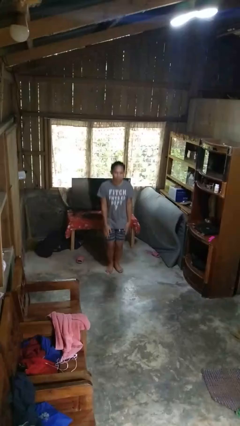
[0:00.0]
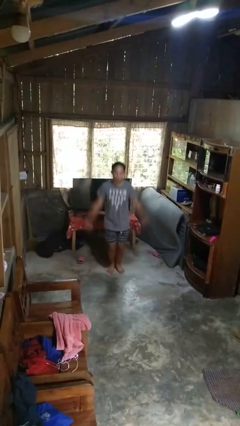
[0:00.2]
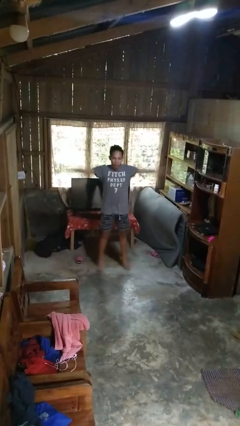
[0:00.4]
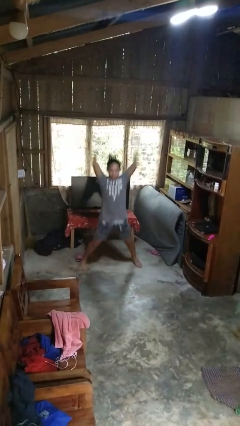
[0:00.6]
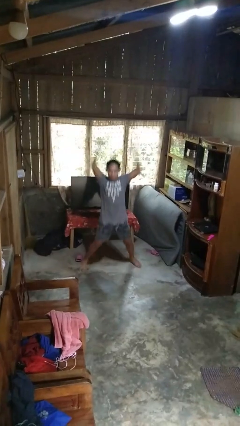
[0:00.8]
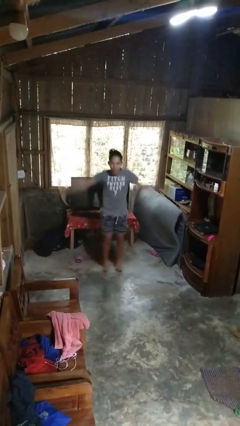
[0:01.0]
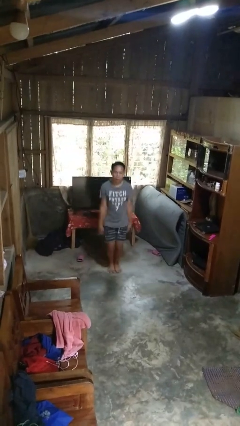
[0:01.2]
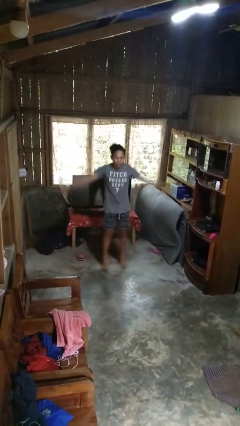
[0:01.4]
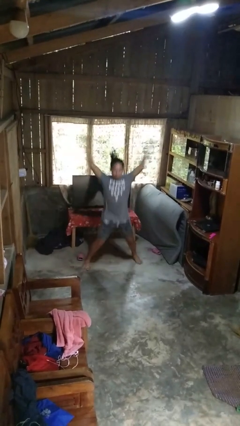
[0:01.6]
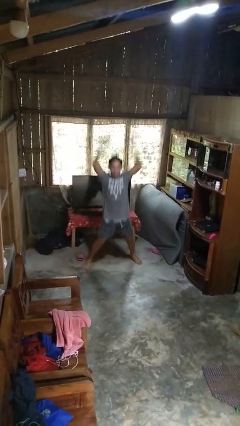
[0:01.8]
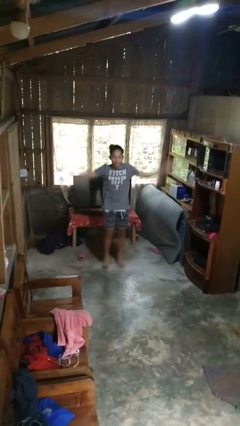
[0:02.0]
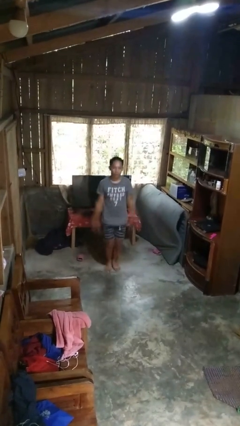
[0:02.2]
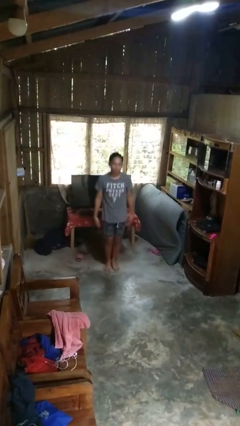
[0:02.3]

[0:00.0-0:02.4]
person exercises with jumping jacks

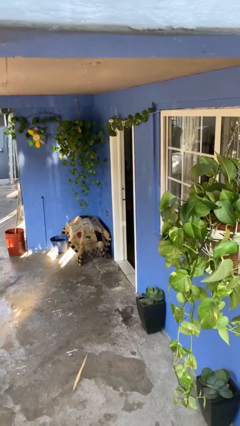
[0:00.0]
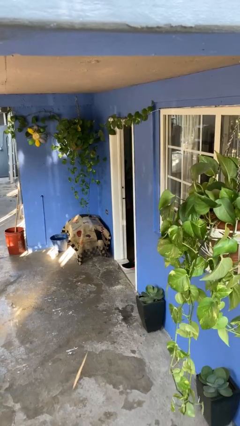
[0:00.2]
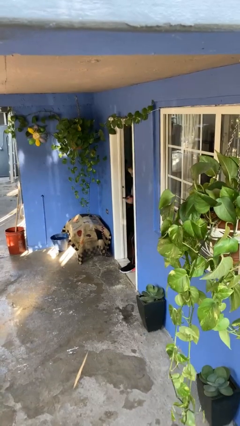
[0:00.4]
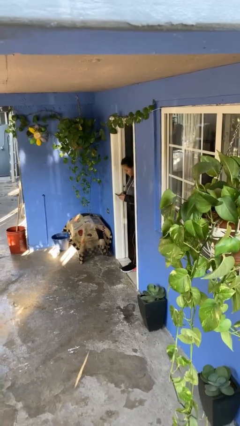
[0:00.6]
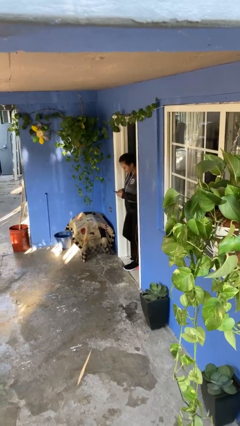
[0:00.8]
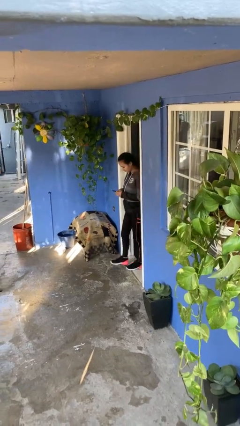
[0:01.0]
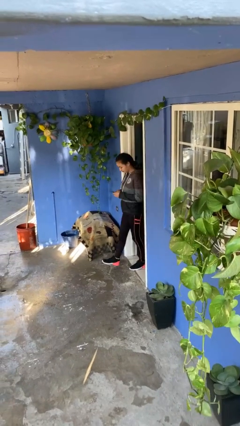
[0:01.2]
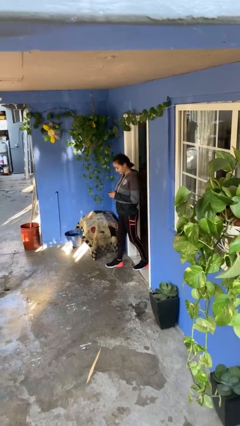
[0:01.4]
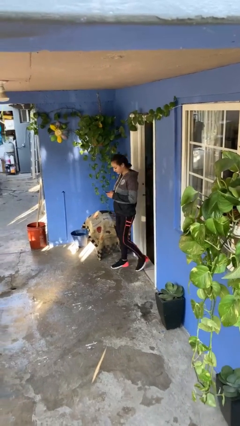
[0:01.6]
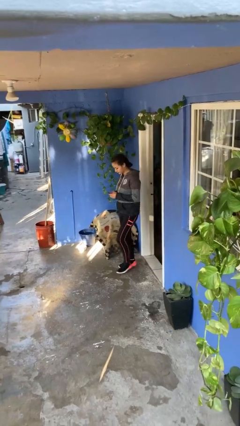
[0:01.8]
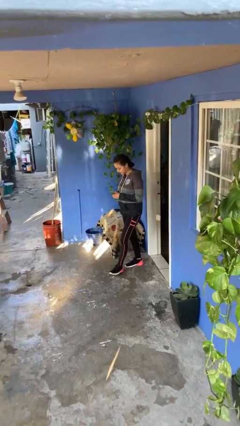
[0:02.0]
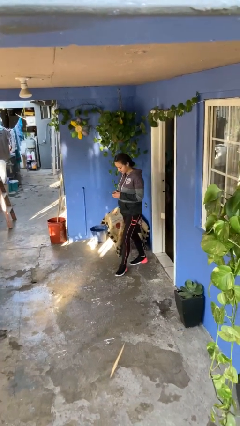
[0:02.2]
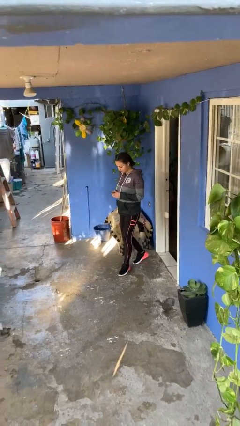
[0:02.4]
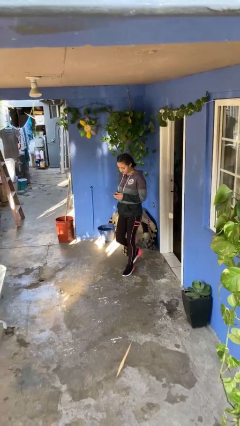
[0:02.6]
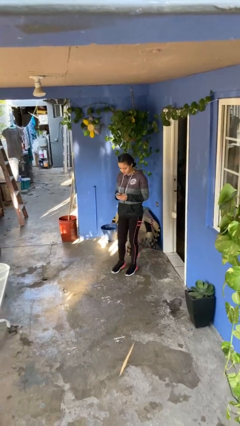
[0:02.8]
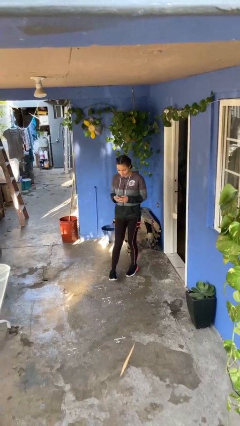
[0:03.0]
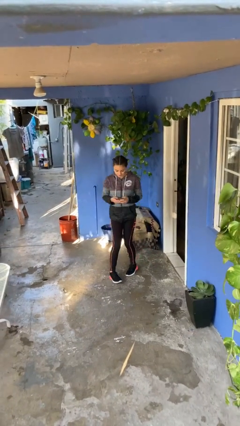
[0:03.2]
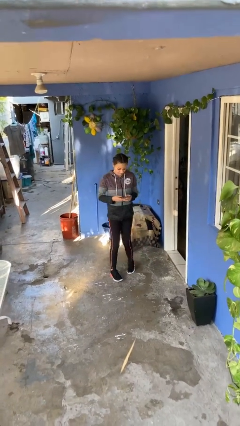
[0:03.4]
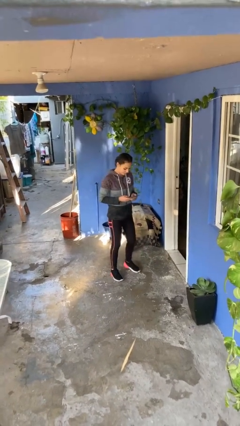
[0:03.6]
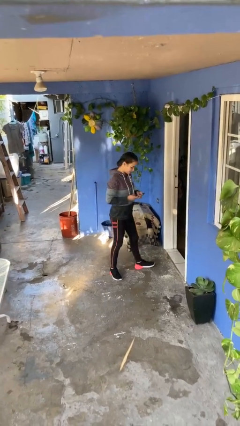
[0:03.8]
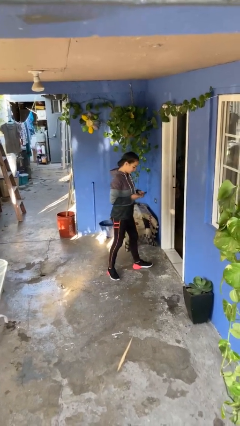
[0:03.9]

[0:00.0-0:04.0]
person enters scene through structure

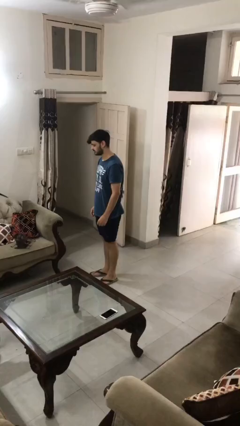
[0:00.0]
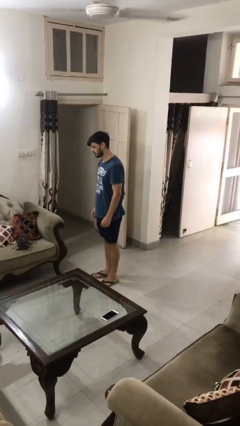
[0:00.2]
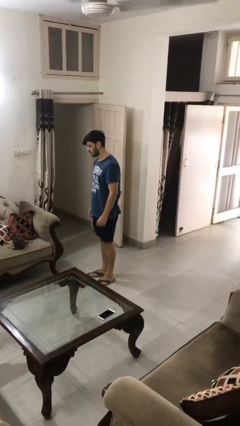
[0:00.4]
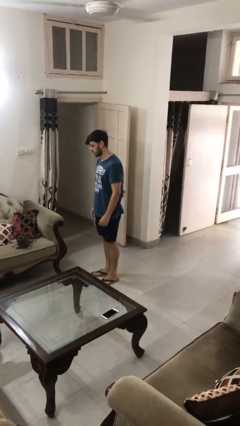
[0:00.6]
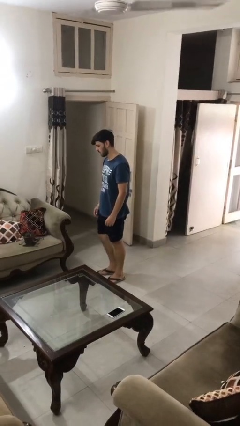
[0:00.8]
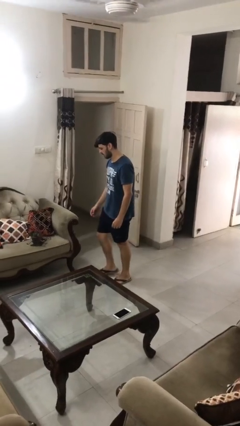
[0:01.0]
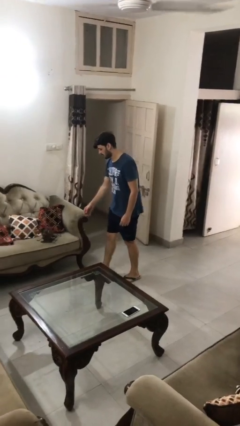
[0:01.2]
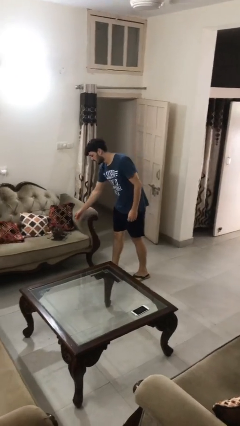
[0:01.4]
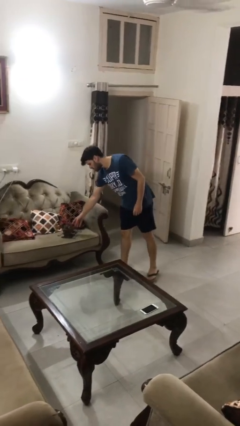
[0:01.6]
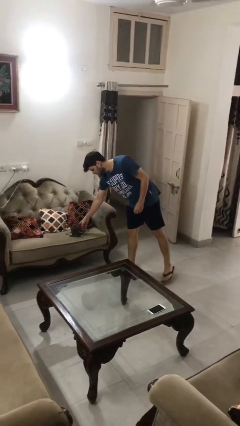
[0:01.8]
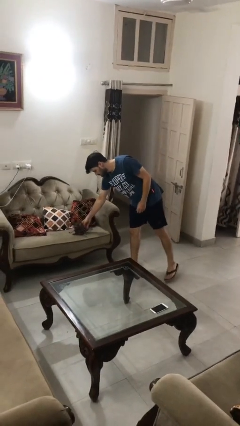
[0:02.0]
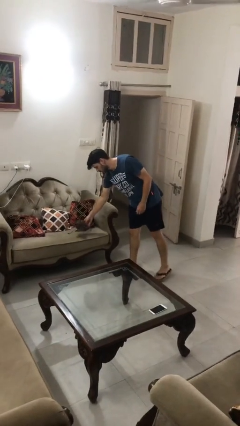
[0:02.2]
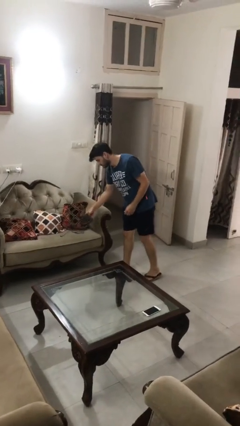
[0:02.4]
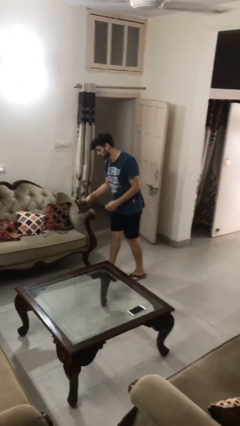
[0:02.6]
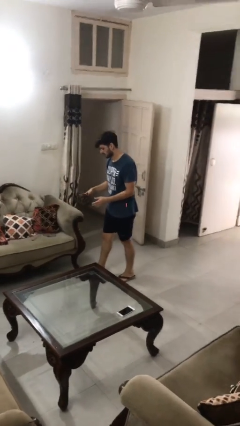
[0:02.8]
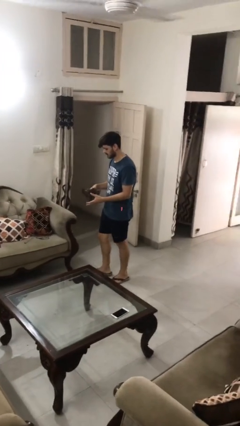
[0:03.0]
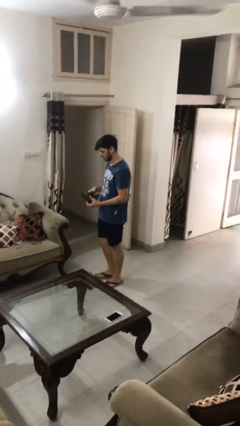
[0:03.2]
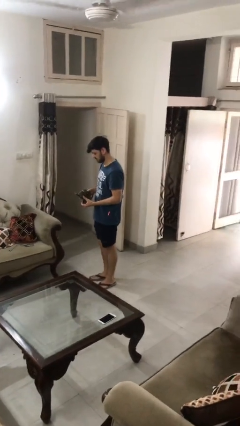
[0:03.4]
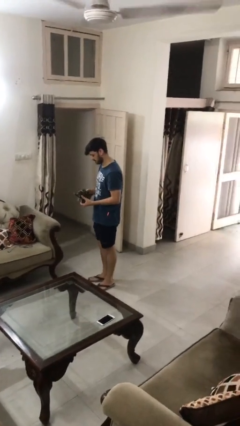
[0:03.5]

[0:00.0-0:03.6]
person picks up object from couch

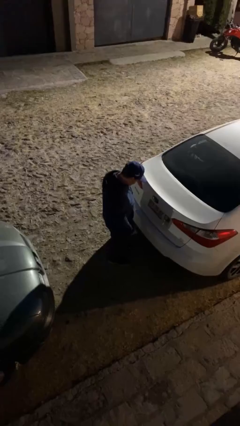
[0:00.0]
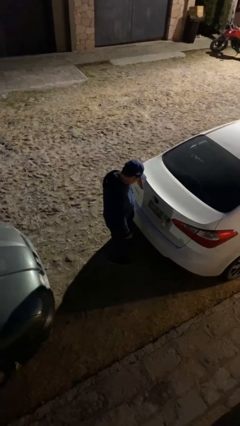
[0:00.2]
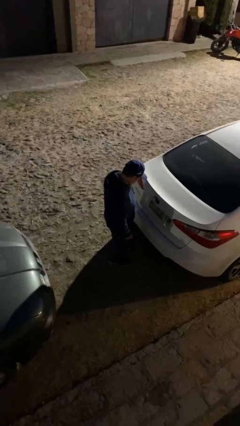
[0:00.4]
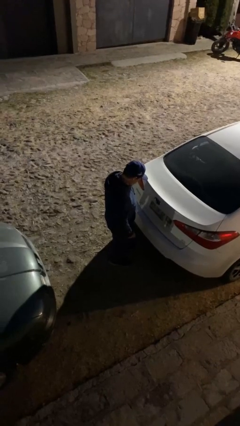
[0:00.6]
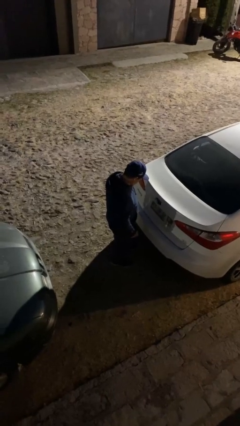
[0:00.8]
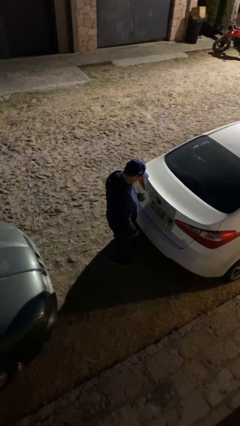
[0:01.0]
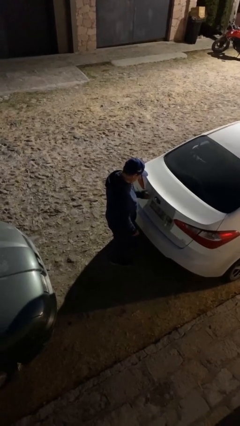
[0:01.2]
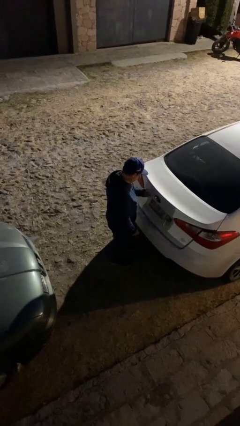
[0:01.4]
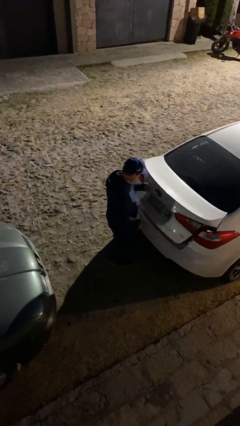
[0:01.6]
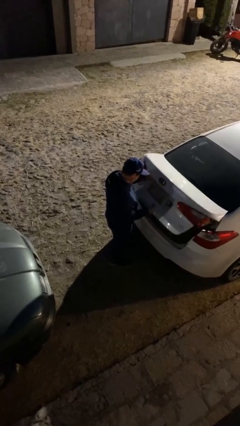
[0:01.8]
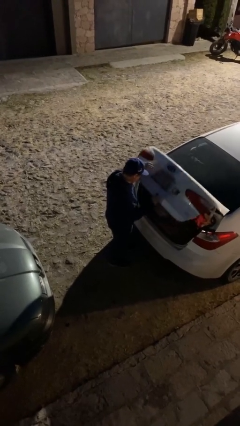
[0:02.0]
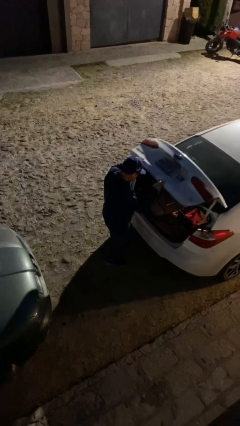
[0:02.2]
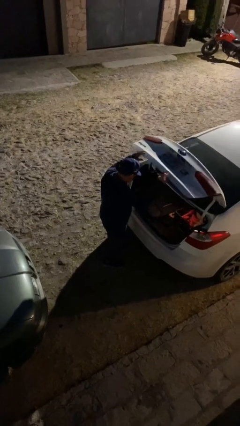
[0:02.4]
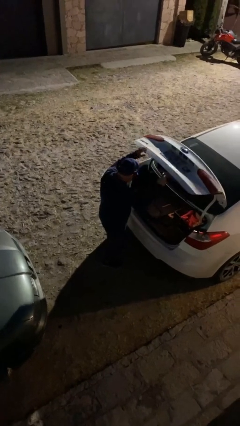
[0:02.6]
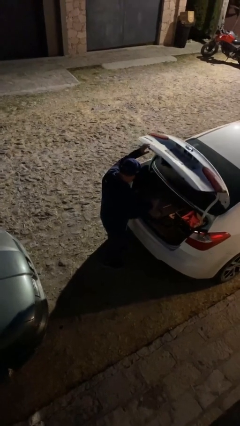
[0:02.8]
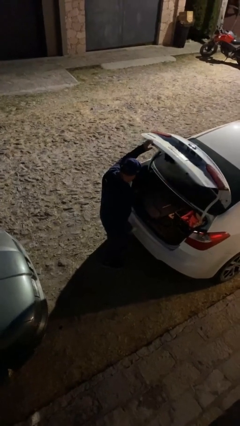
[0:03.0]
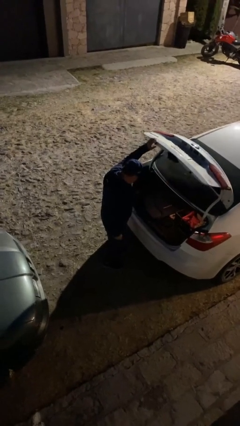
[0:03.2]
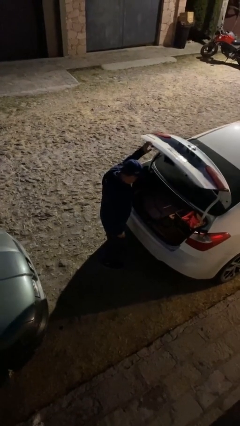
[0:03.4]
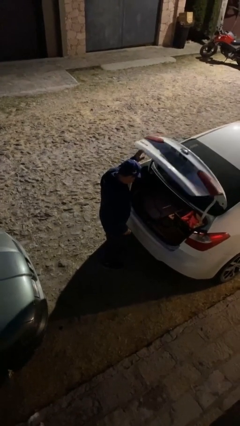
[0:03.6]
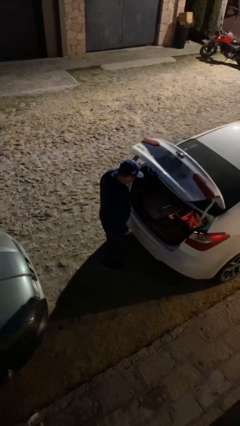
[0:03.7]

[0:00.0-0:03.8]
person opens car trunk

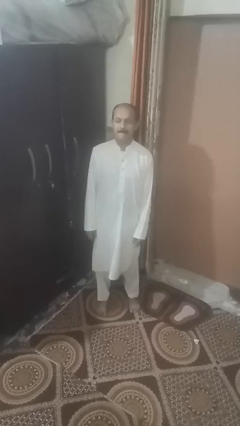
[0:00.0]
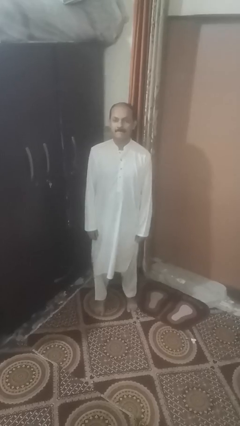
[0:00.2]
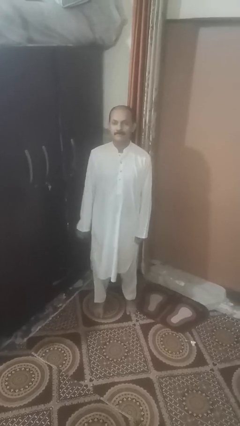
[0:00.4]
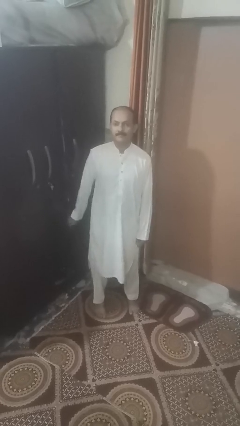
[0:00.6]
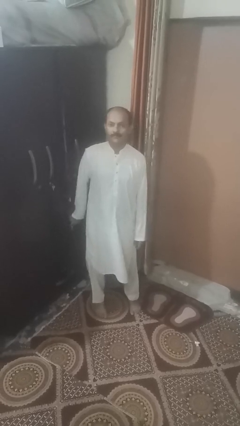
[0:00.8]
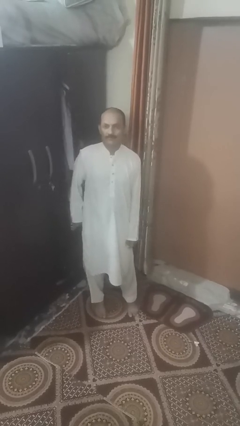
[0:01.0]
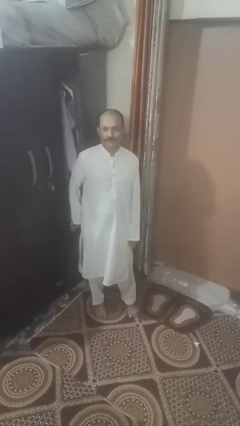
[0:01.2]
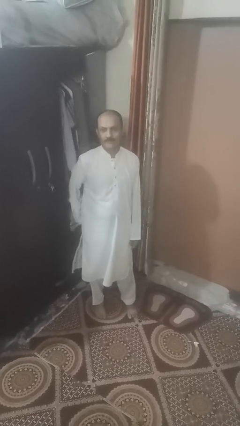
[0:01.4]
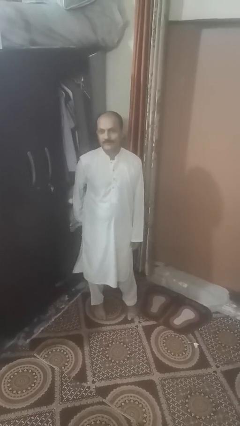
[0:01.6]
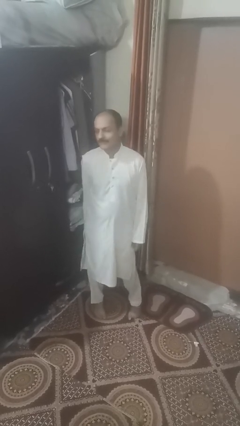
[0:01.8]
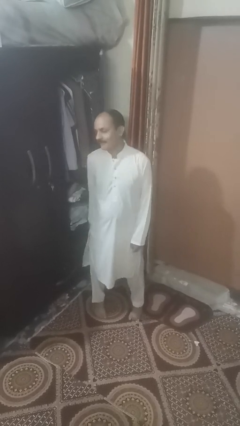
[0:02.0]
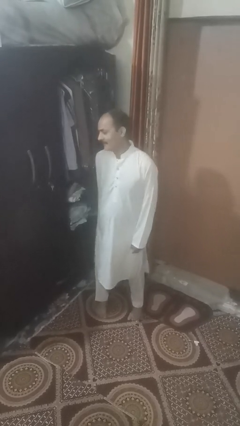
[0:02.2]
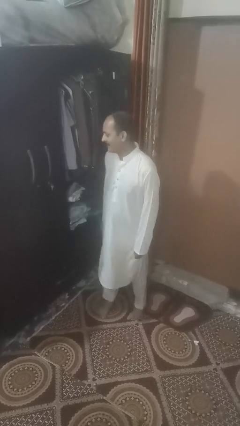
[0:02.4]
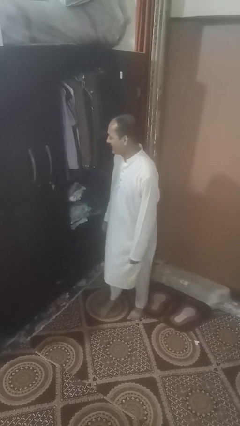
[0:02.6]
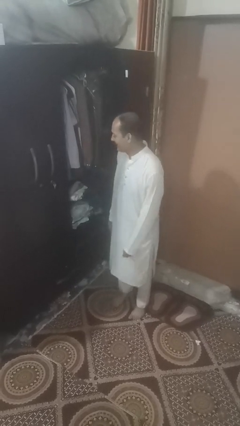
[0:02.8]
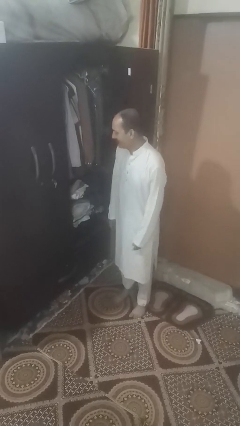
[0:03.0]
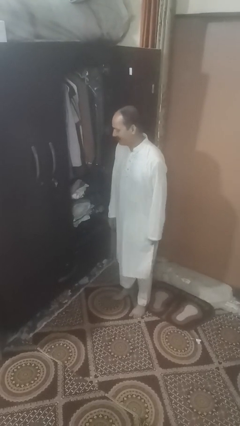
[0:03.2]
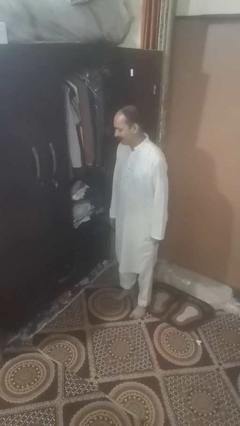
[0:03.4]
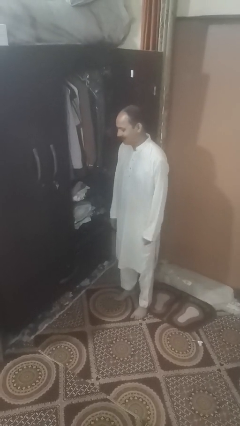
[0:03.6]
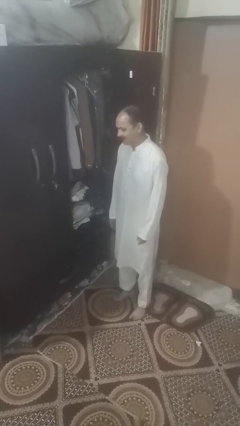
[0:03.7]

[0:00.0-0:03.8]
person opens facility door

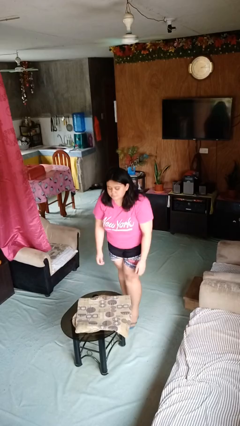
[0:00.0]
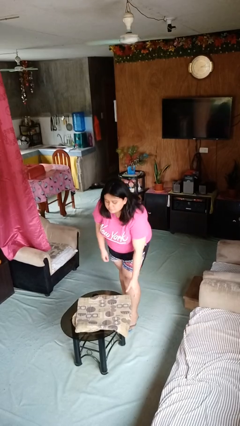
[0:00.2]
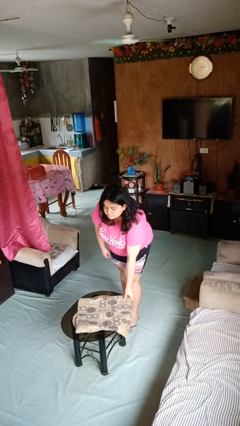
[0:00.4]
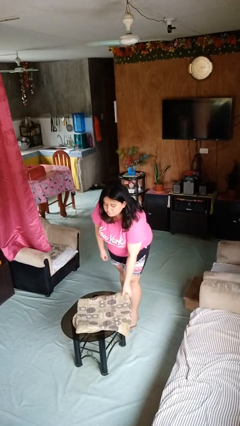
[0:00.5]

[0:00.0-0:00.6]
person picks up object from table
